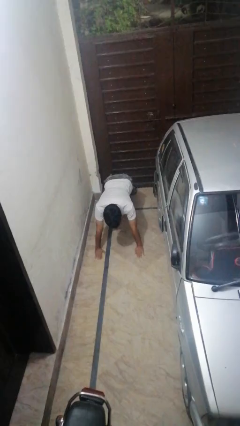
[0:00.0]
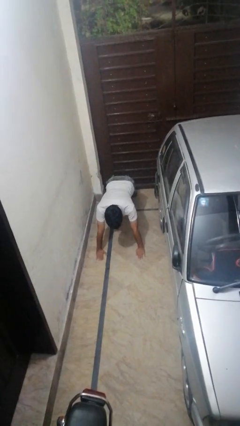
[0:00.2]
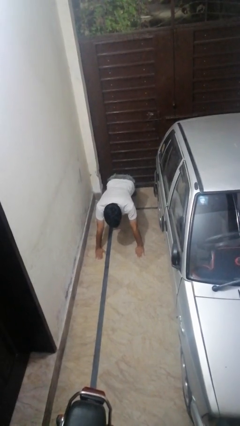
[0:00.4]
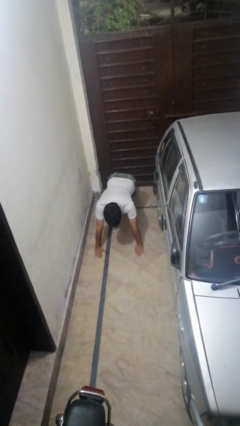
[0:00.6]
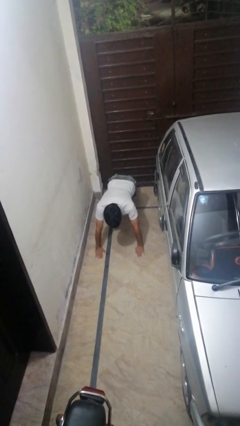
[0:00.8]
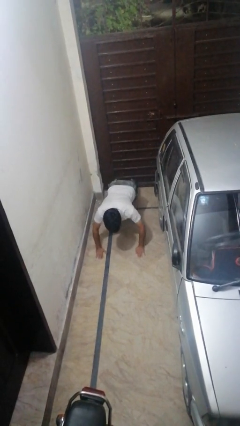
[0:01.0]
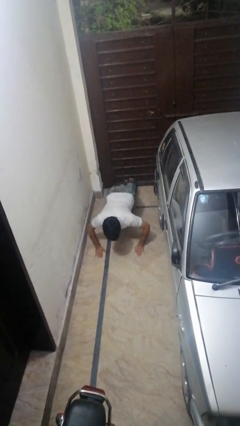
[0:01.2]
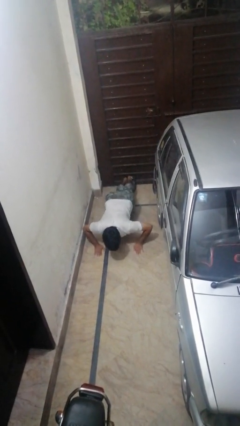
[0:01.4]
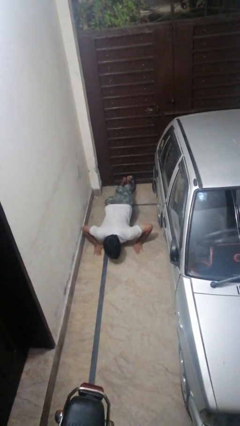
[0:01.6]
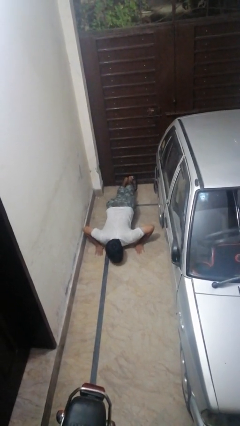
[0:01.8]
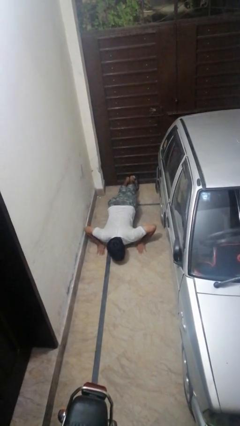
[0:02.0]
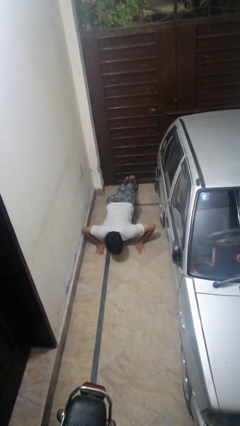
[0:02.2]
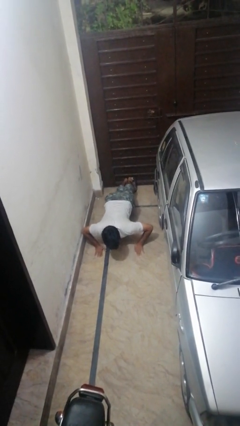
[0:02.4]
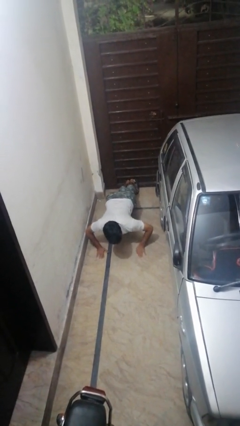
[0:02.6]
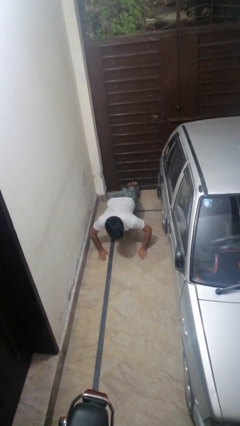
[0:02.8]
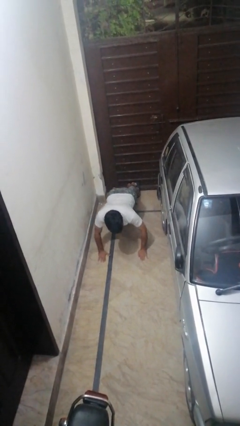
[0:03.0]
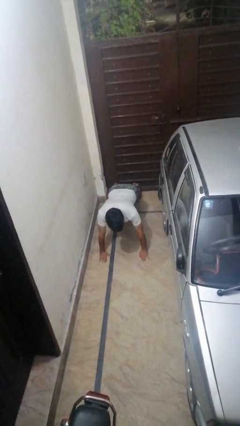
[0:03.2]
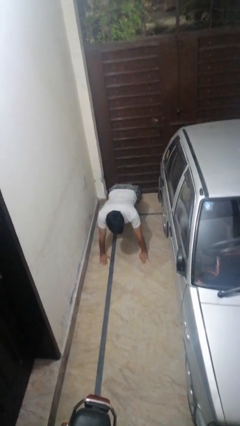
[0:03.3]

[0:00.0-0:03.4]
person exercises with pushup

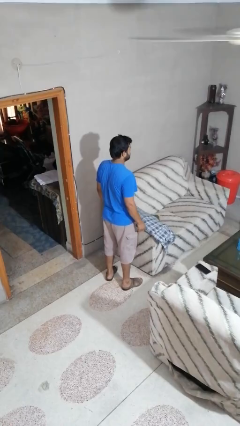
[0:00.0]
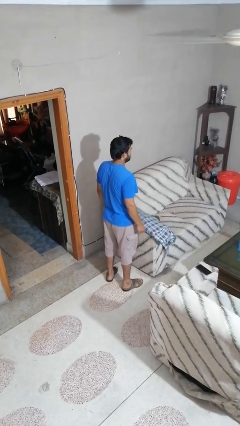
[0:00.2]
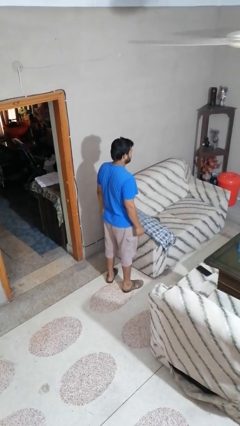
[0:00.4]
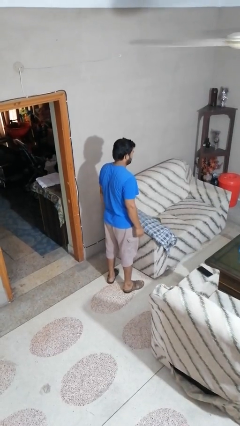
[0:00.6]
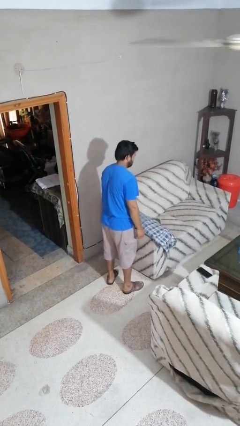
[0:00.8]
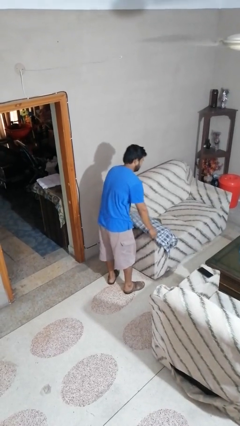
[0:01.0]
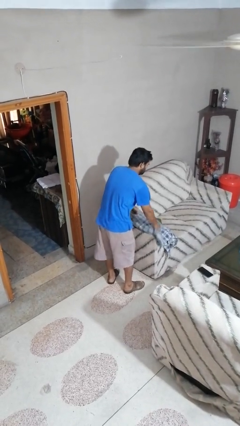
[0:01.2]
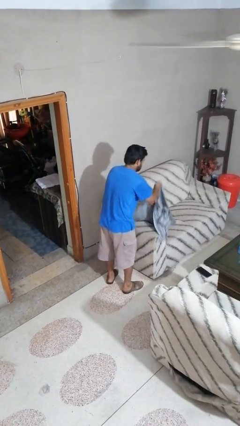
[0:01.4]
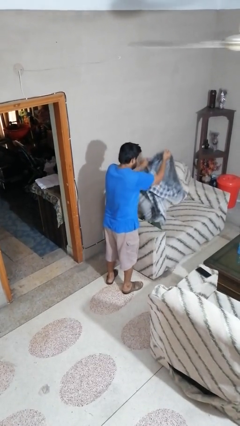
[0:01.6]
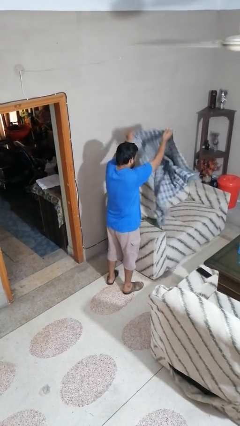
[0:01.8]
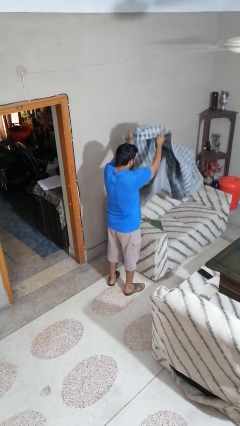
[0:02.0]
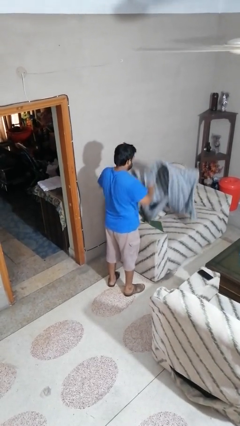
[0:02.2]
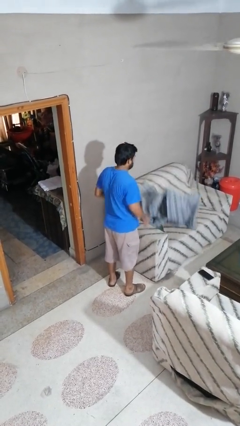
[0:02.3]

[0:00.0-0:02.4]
person unfolds blanket

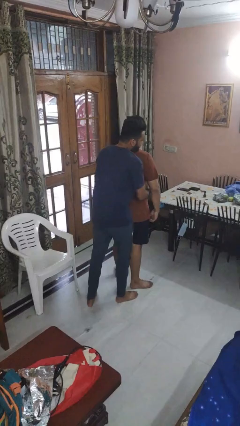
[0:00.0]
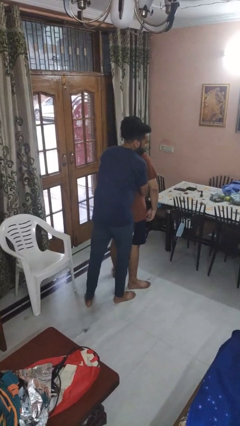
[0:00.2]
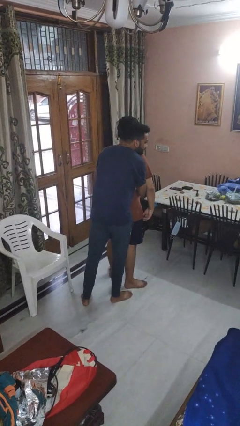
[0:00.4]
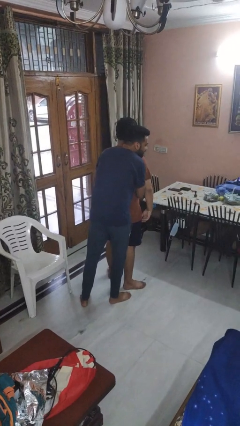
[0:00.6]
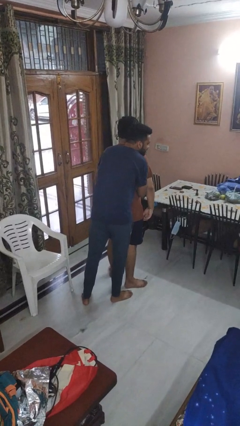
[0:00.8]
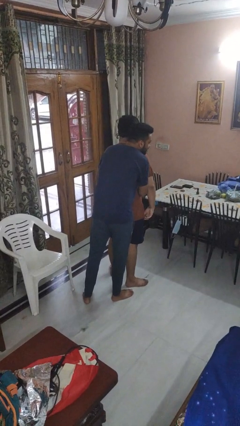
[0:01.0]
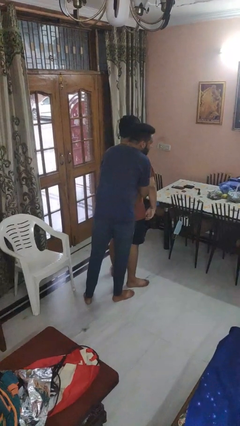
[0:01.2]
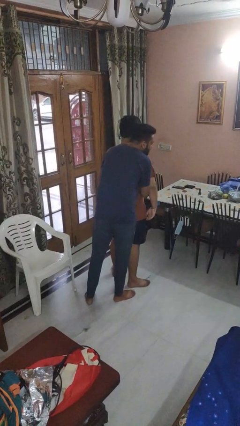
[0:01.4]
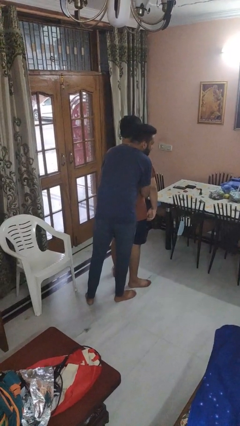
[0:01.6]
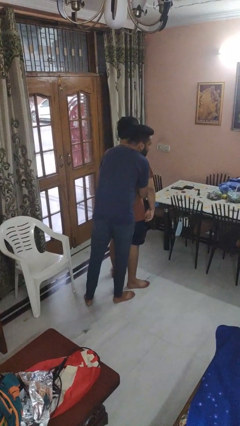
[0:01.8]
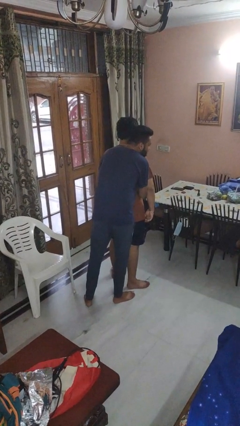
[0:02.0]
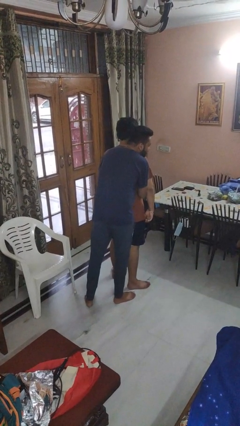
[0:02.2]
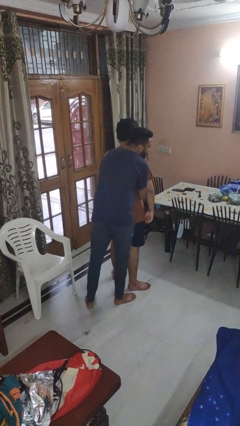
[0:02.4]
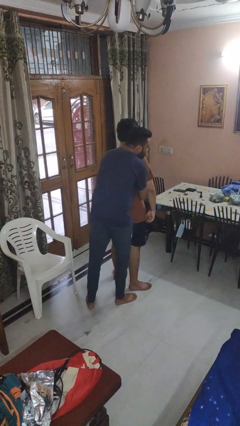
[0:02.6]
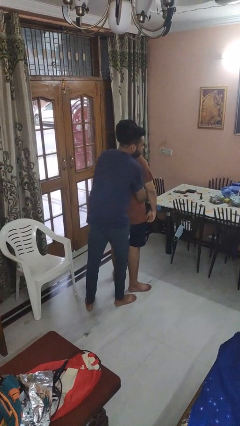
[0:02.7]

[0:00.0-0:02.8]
person hugs person from behind

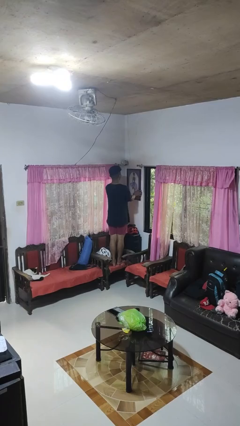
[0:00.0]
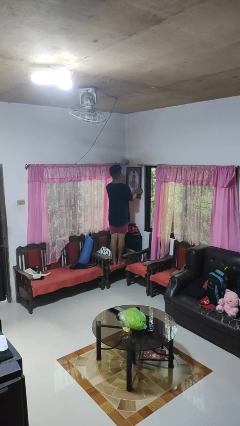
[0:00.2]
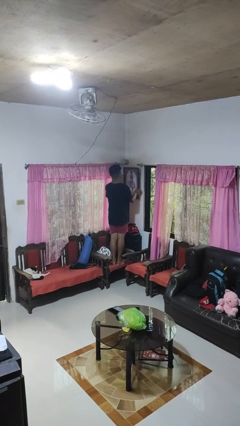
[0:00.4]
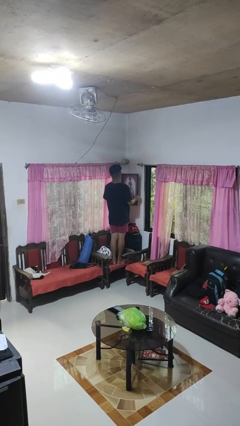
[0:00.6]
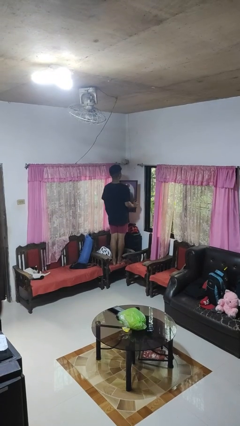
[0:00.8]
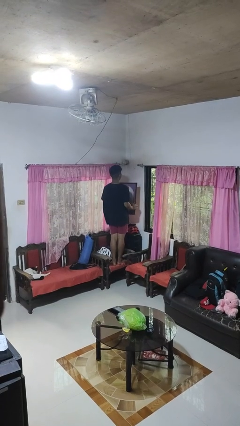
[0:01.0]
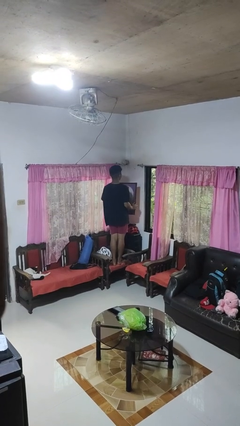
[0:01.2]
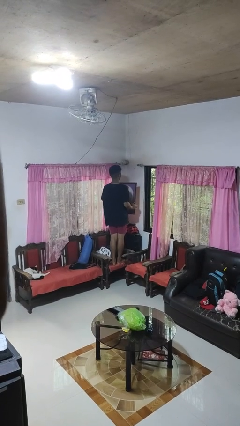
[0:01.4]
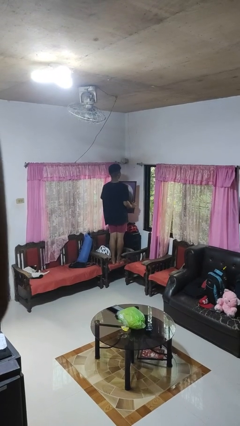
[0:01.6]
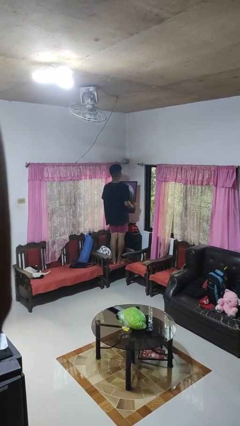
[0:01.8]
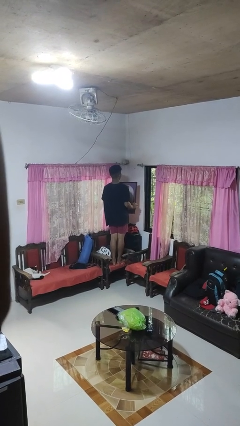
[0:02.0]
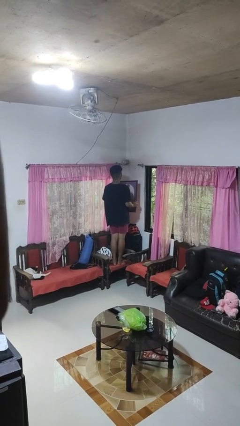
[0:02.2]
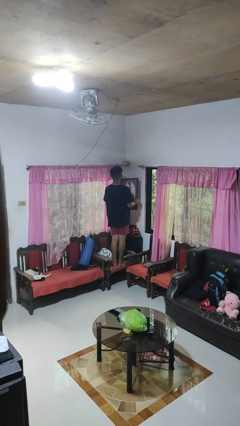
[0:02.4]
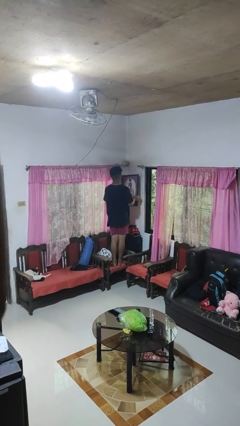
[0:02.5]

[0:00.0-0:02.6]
person takes down picture frame

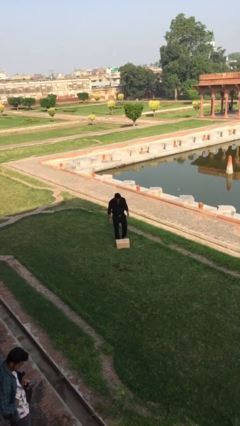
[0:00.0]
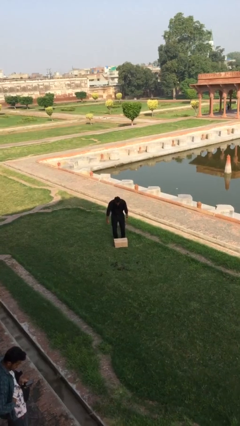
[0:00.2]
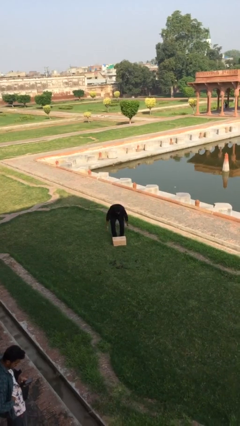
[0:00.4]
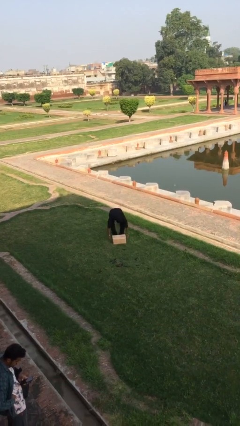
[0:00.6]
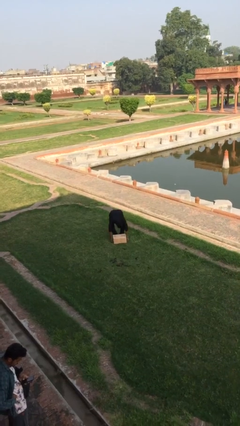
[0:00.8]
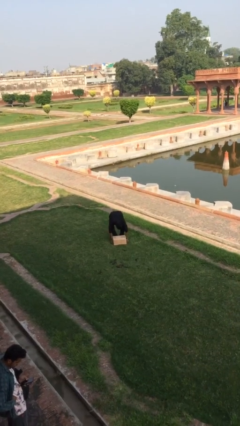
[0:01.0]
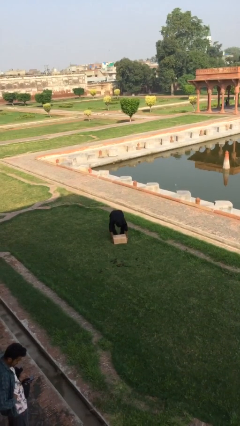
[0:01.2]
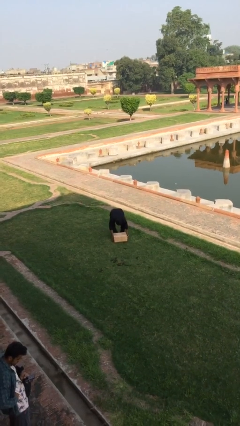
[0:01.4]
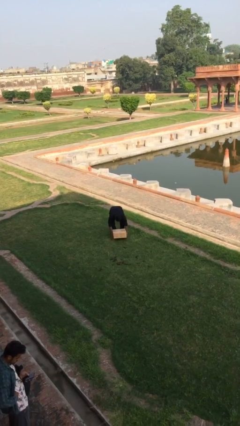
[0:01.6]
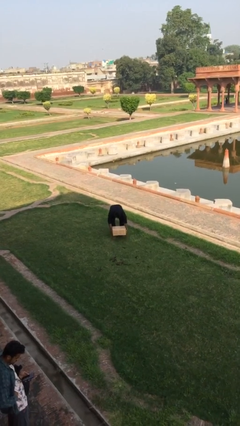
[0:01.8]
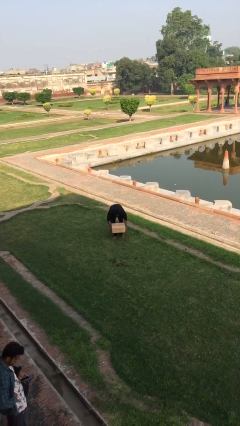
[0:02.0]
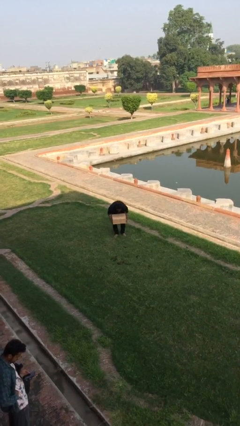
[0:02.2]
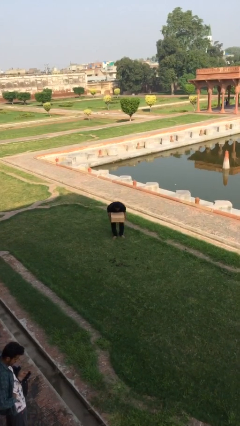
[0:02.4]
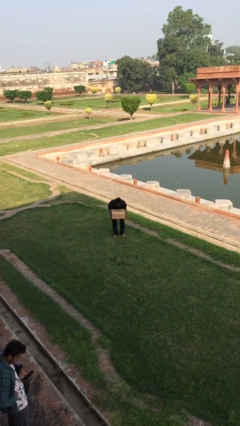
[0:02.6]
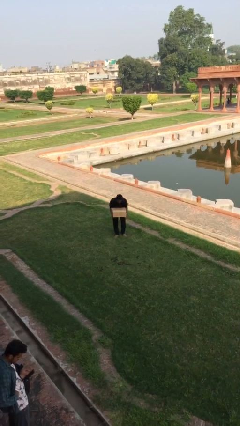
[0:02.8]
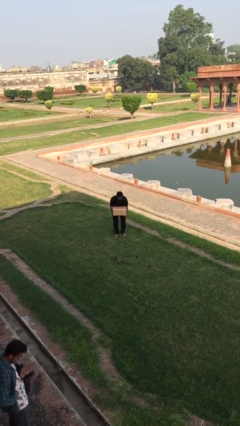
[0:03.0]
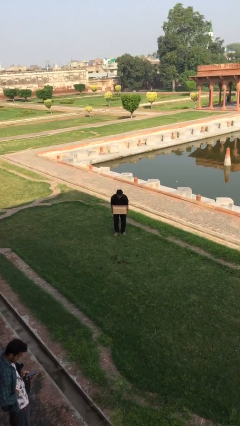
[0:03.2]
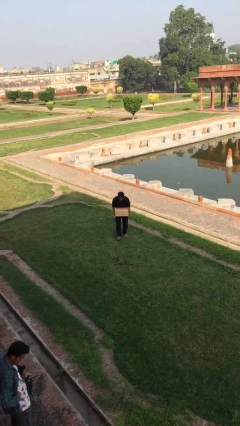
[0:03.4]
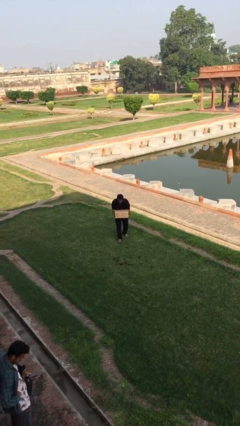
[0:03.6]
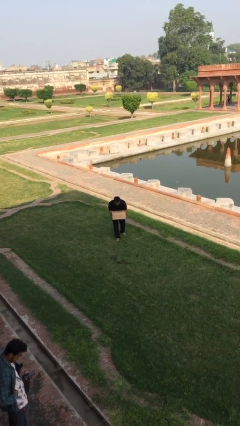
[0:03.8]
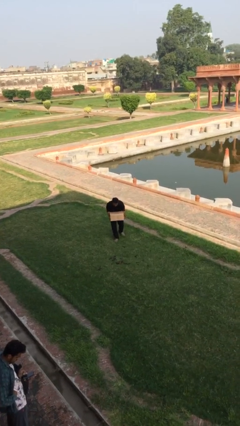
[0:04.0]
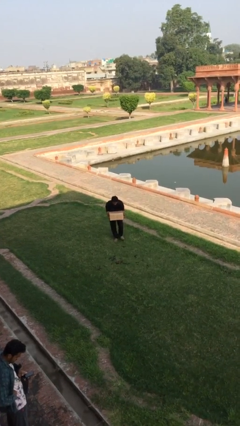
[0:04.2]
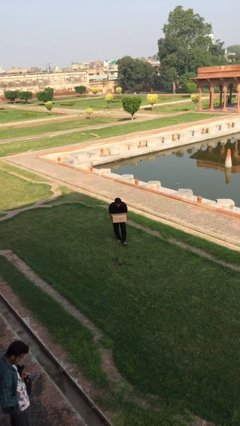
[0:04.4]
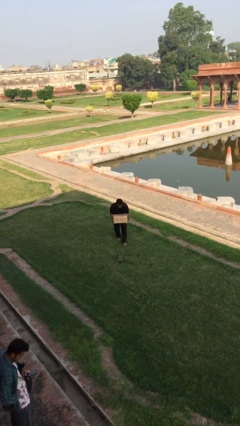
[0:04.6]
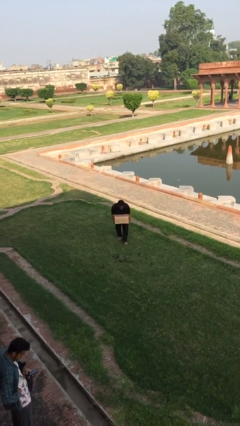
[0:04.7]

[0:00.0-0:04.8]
person picks up object from floor

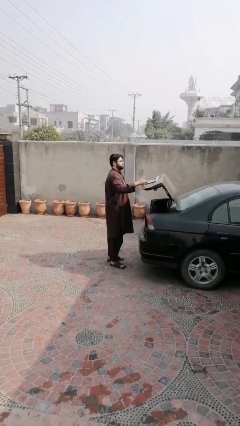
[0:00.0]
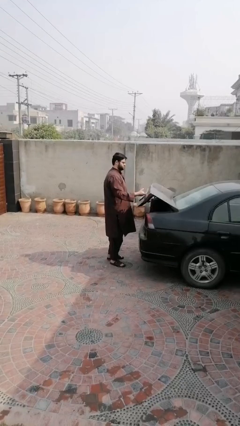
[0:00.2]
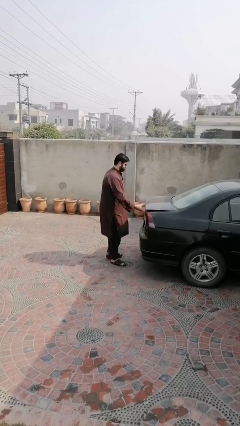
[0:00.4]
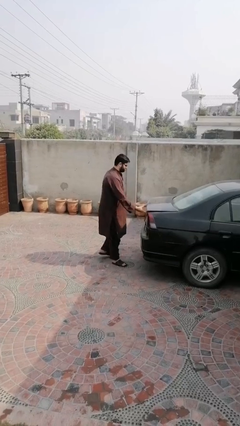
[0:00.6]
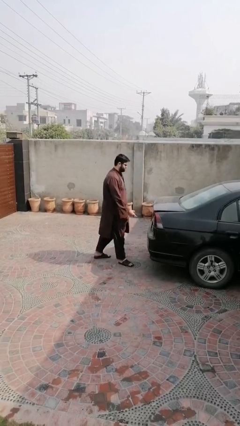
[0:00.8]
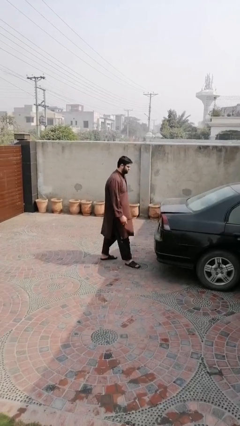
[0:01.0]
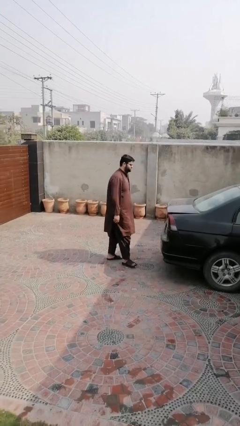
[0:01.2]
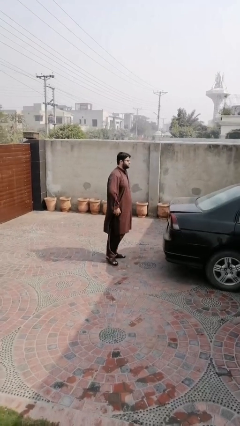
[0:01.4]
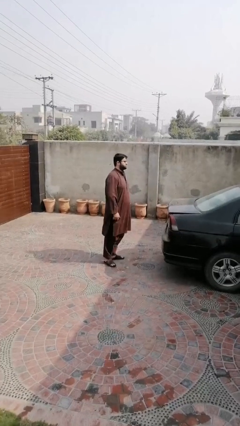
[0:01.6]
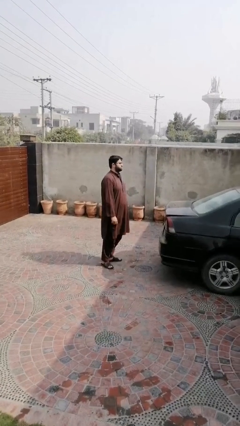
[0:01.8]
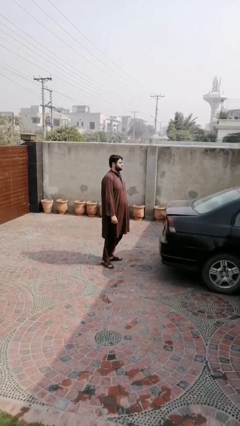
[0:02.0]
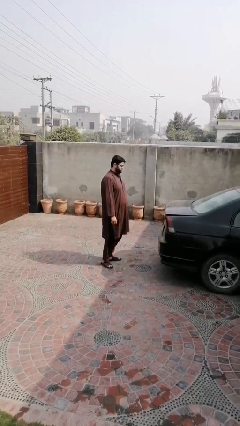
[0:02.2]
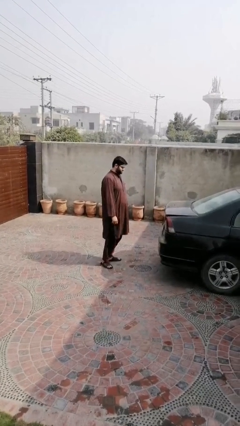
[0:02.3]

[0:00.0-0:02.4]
person closes car trunk
